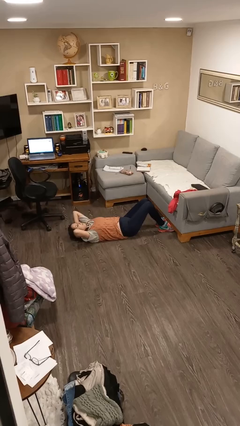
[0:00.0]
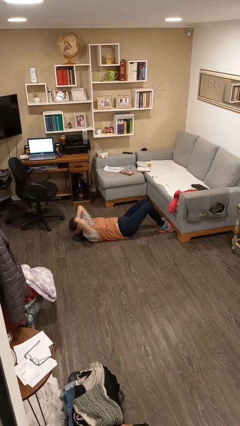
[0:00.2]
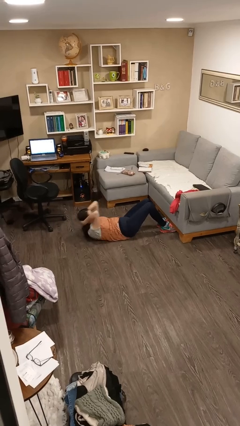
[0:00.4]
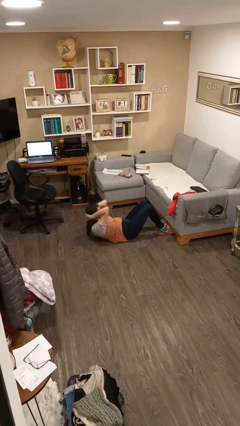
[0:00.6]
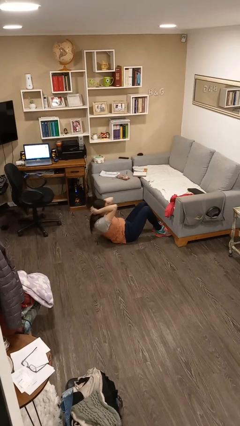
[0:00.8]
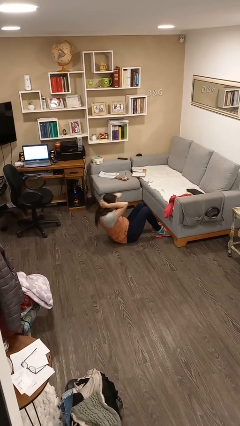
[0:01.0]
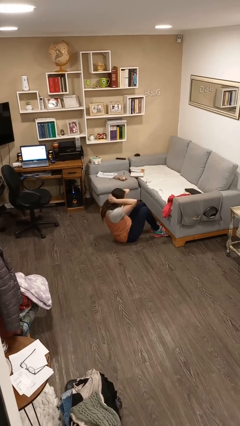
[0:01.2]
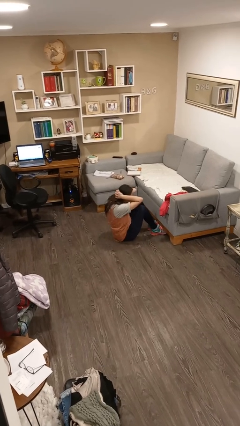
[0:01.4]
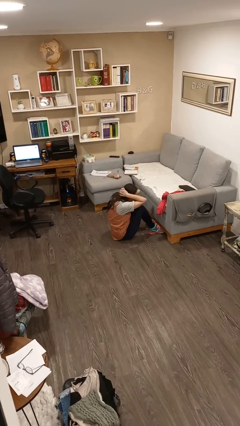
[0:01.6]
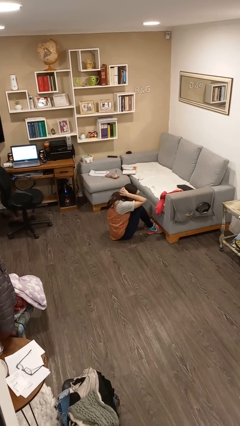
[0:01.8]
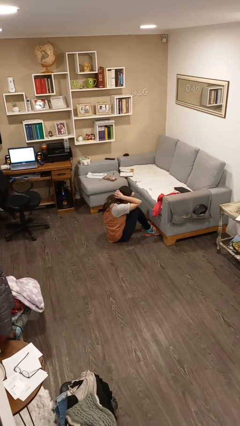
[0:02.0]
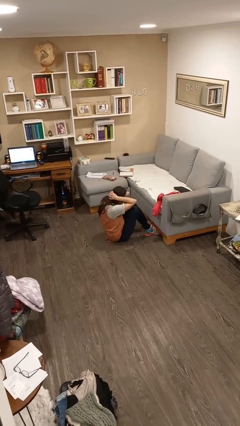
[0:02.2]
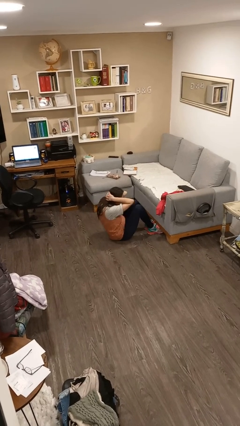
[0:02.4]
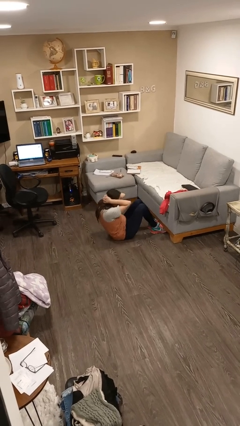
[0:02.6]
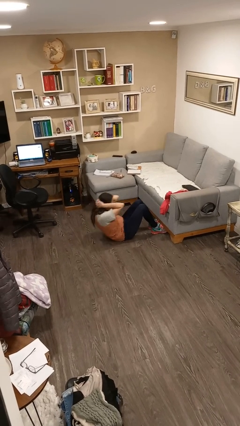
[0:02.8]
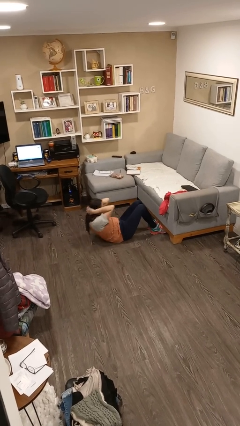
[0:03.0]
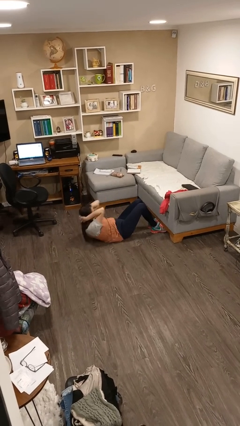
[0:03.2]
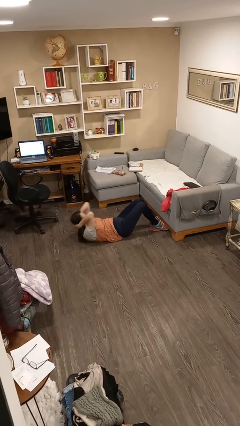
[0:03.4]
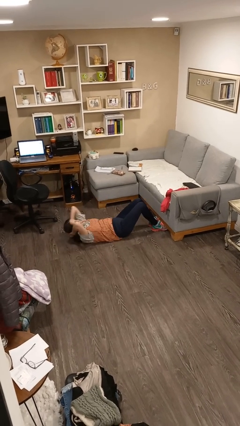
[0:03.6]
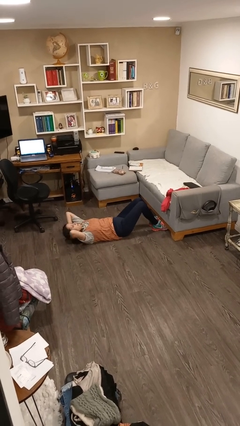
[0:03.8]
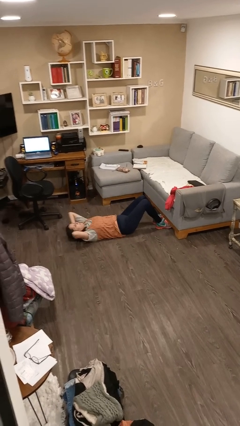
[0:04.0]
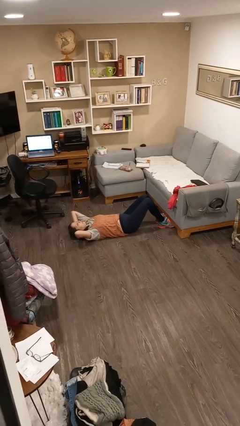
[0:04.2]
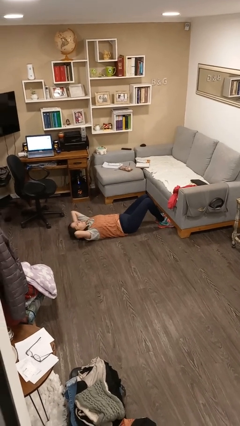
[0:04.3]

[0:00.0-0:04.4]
person exercises with situp

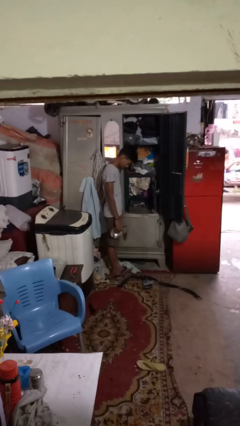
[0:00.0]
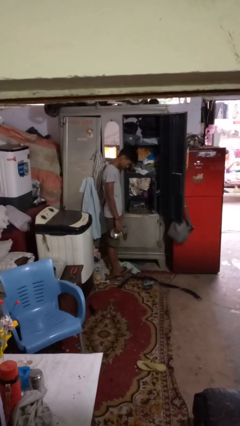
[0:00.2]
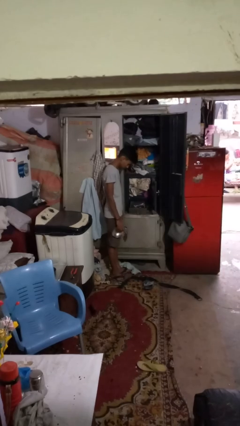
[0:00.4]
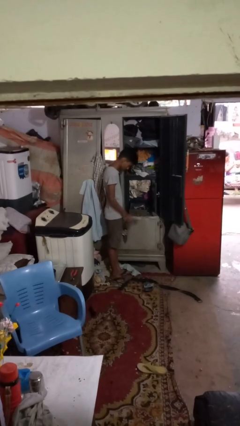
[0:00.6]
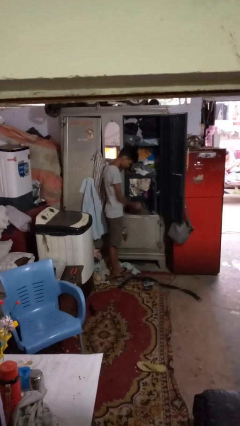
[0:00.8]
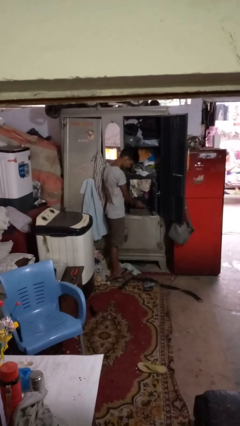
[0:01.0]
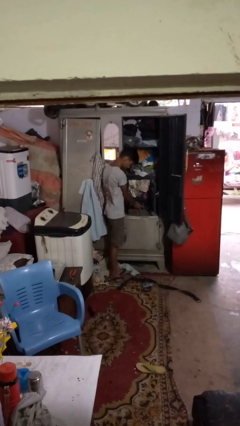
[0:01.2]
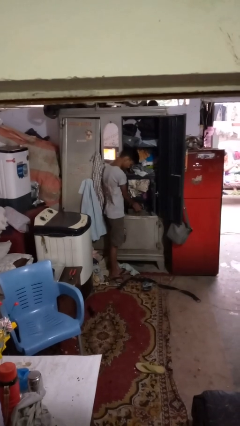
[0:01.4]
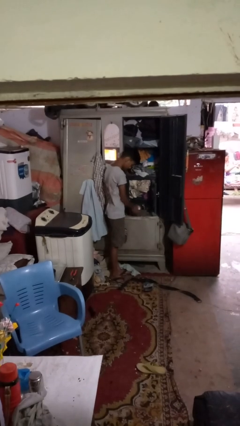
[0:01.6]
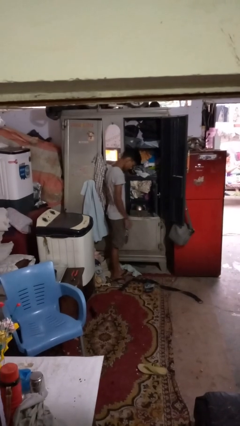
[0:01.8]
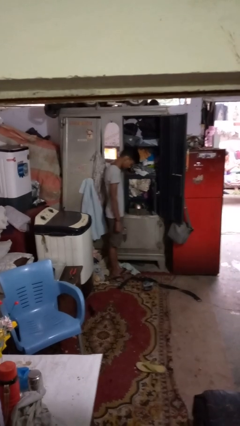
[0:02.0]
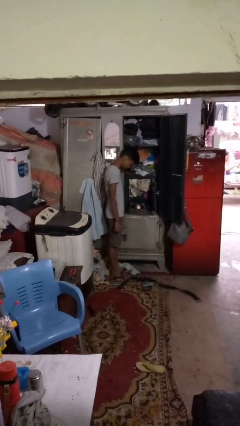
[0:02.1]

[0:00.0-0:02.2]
person puts clothes into dresser

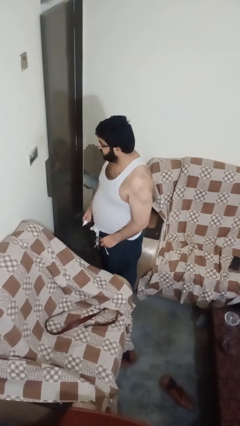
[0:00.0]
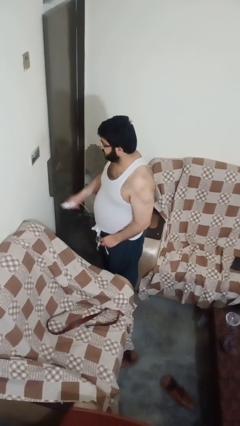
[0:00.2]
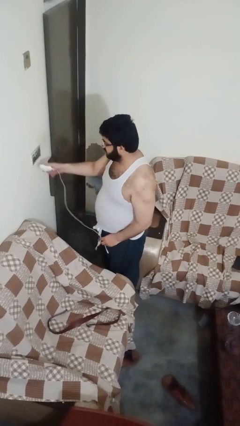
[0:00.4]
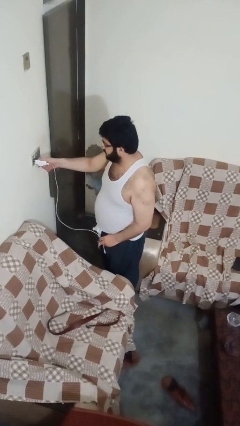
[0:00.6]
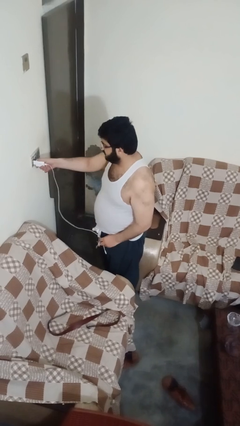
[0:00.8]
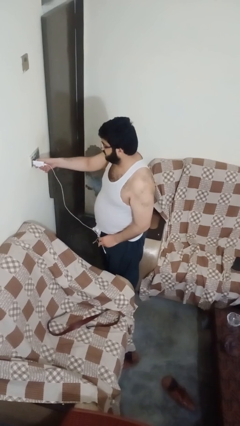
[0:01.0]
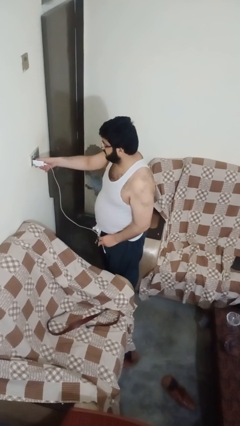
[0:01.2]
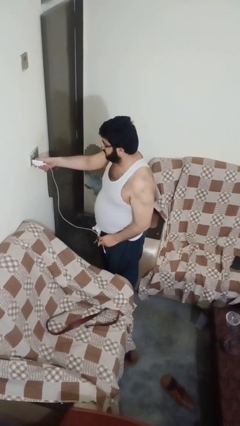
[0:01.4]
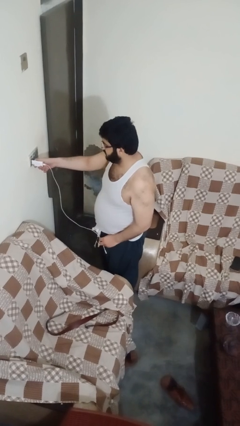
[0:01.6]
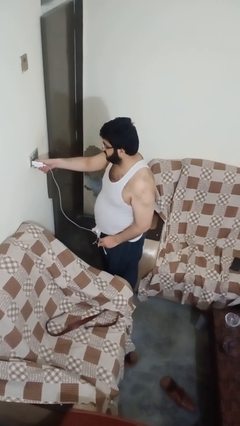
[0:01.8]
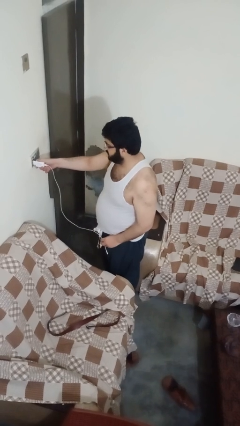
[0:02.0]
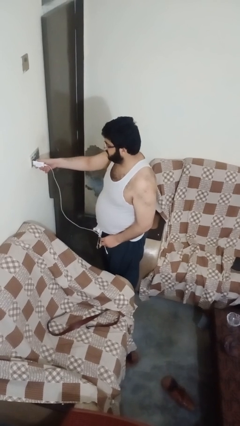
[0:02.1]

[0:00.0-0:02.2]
person plugs into electrical socket

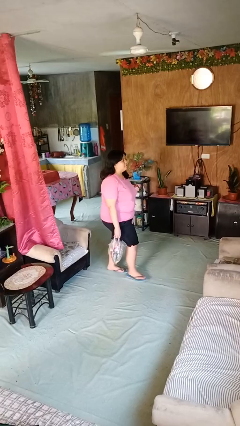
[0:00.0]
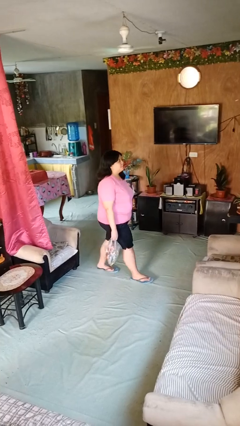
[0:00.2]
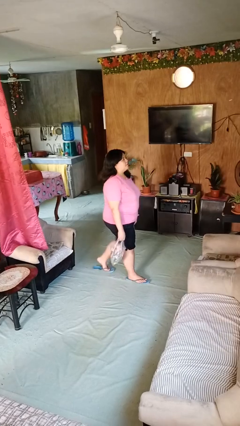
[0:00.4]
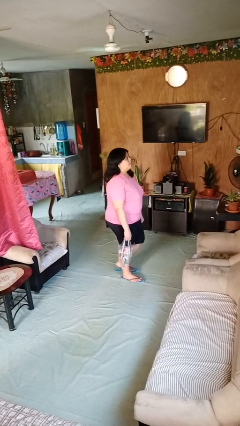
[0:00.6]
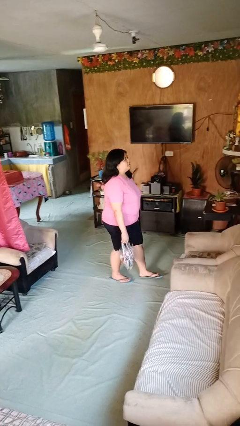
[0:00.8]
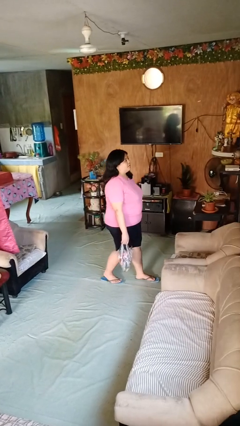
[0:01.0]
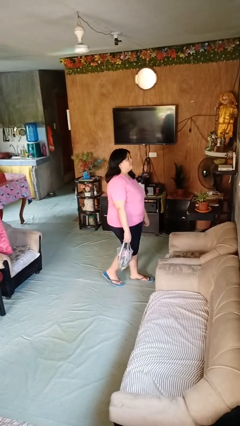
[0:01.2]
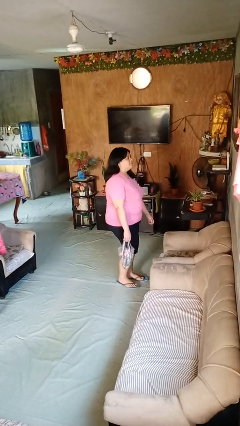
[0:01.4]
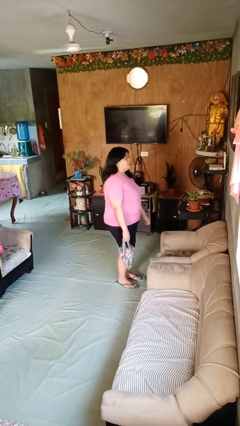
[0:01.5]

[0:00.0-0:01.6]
person carries groceries

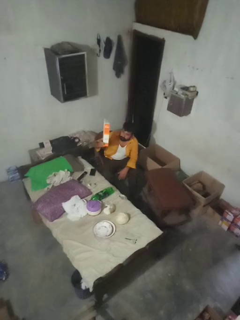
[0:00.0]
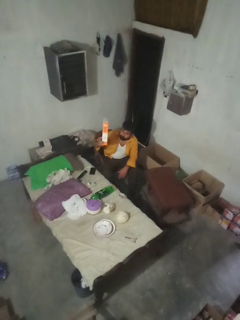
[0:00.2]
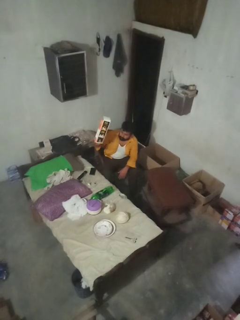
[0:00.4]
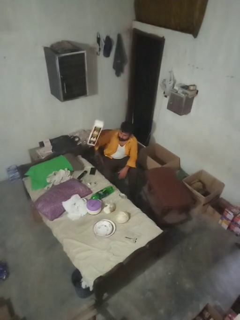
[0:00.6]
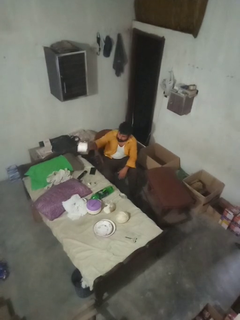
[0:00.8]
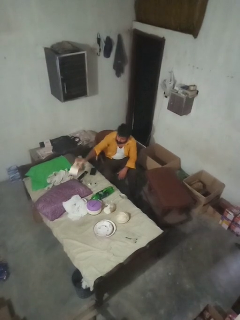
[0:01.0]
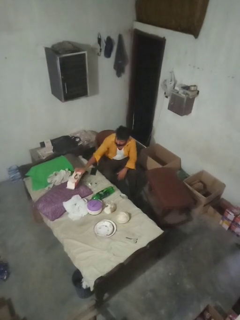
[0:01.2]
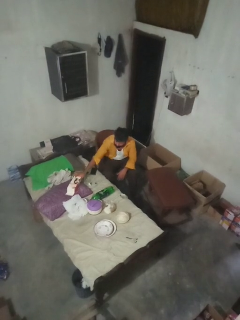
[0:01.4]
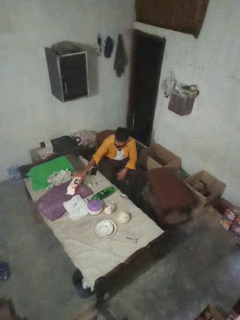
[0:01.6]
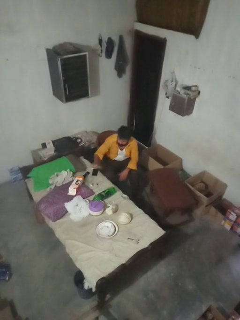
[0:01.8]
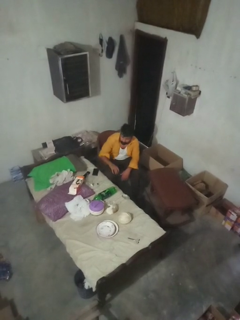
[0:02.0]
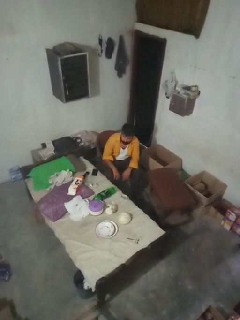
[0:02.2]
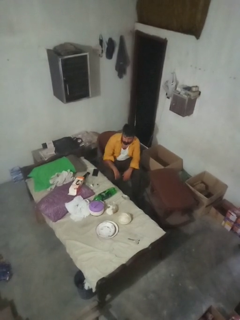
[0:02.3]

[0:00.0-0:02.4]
person puts down object on bed

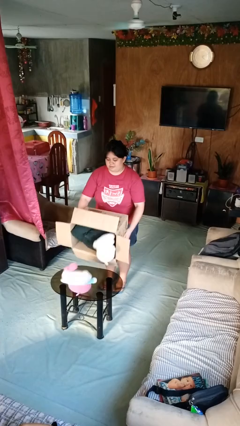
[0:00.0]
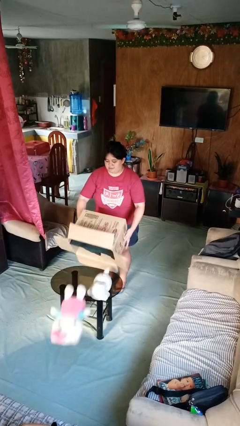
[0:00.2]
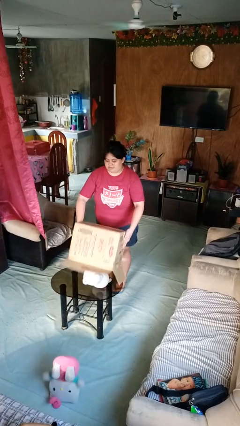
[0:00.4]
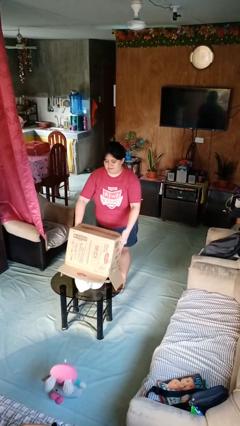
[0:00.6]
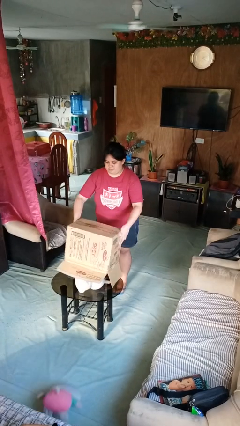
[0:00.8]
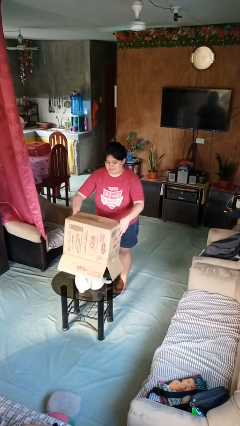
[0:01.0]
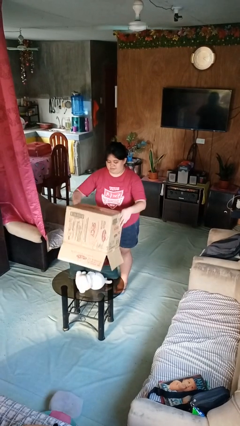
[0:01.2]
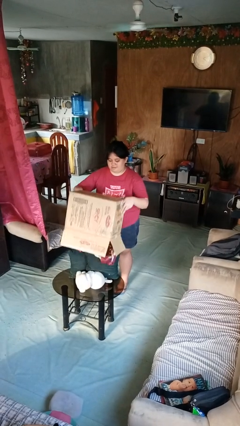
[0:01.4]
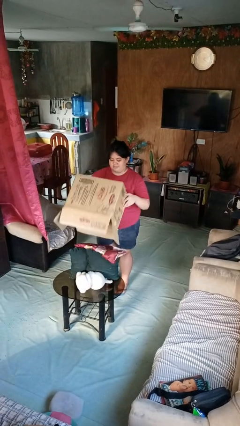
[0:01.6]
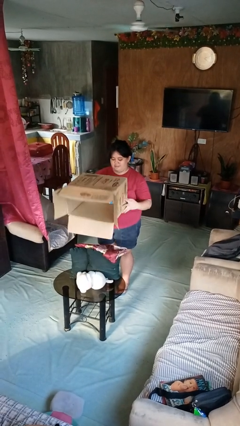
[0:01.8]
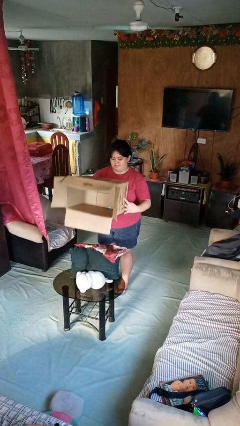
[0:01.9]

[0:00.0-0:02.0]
person unloads box onto table

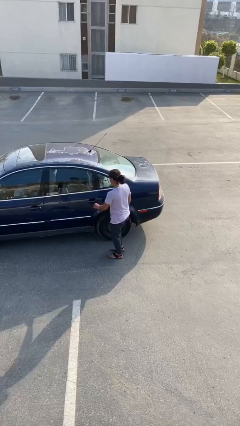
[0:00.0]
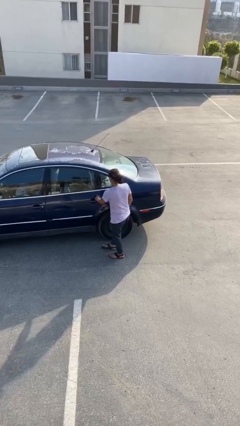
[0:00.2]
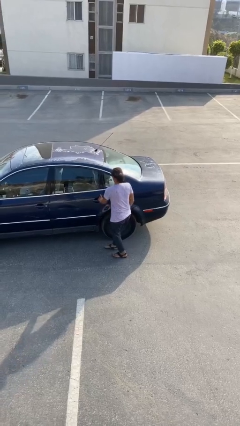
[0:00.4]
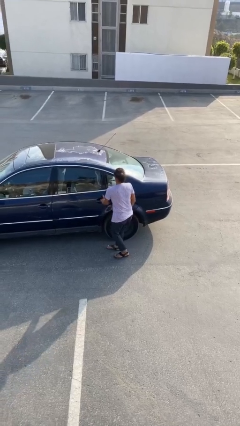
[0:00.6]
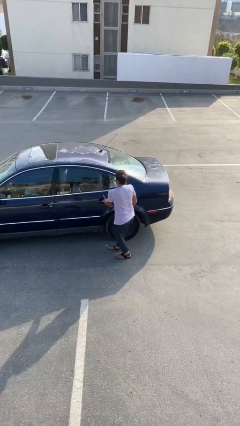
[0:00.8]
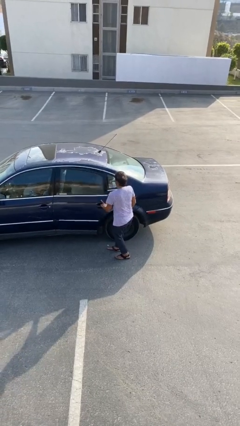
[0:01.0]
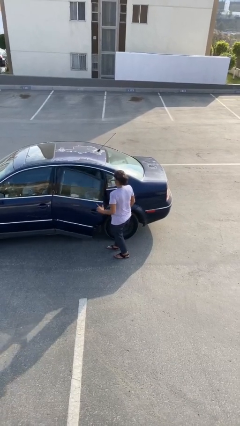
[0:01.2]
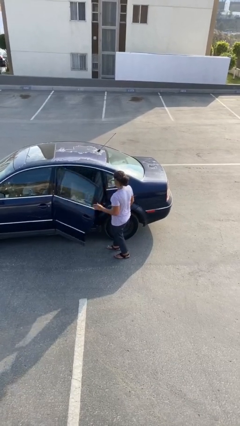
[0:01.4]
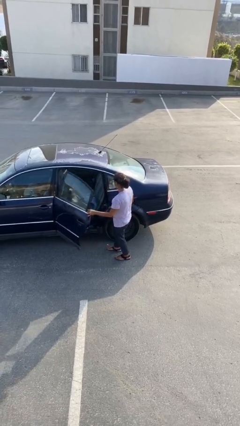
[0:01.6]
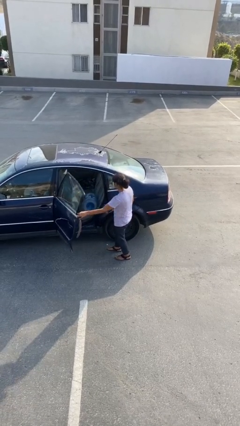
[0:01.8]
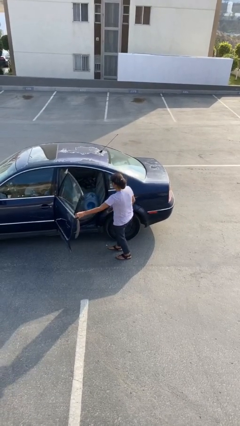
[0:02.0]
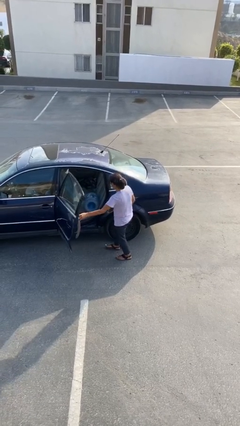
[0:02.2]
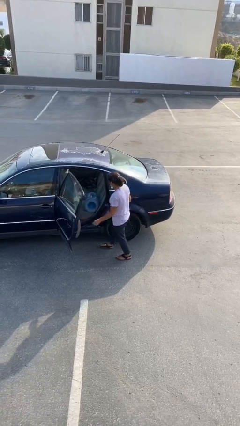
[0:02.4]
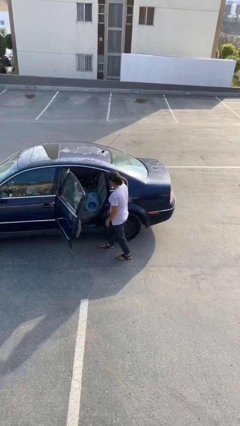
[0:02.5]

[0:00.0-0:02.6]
person opens car door
